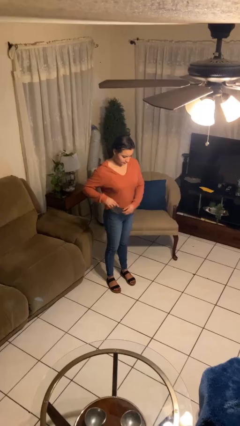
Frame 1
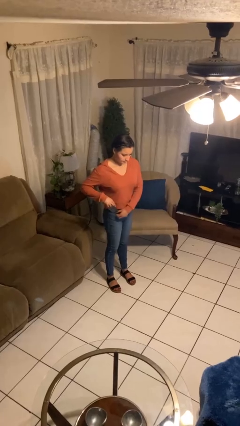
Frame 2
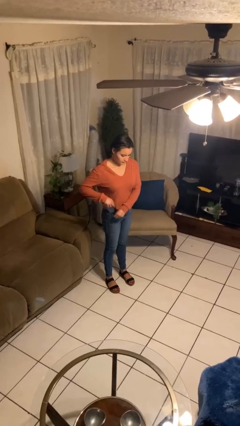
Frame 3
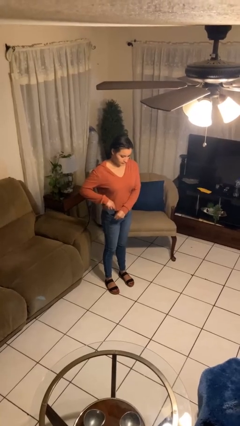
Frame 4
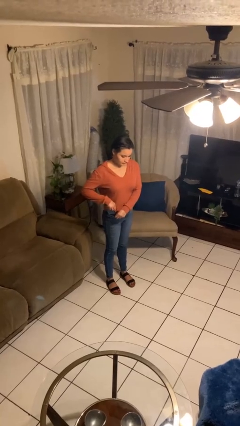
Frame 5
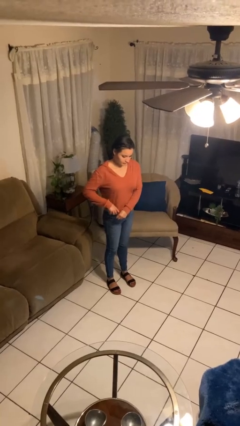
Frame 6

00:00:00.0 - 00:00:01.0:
person puts phone into pocket

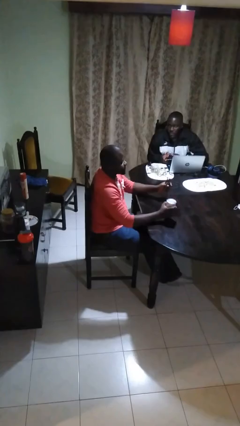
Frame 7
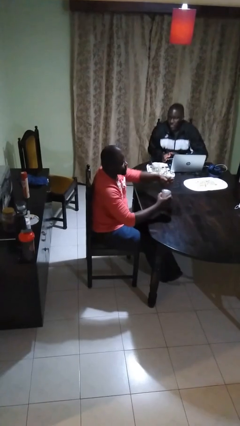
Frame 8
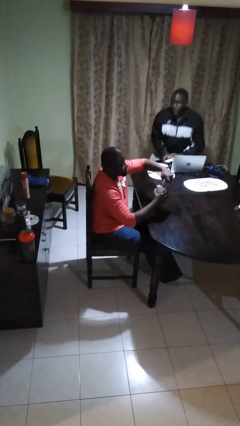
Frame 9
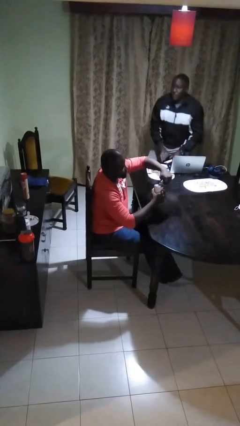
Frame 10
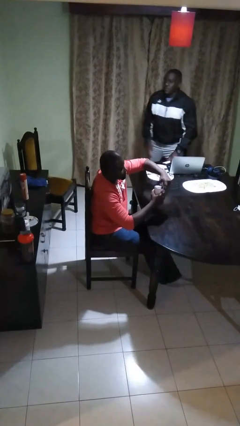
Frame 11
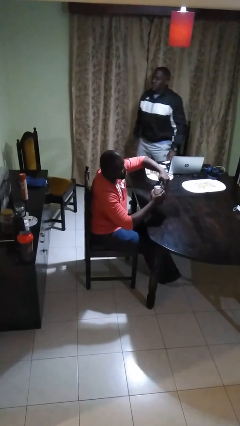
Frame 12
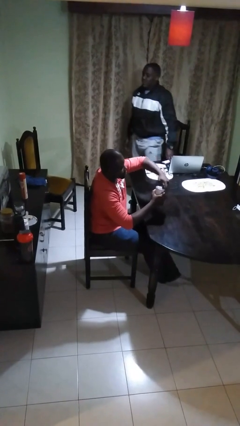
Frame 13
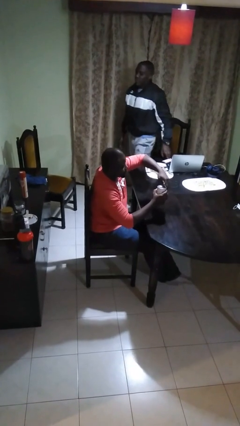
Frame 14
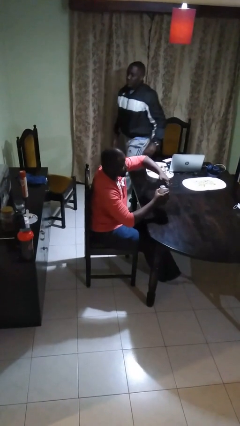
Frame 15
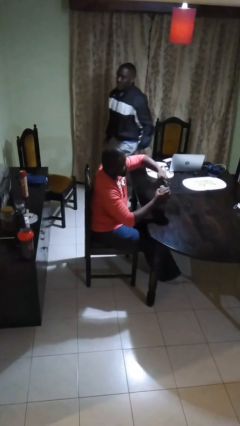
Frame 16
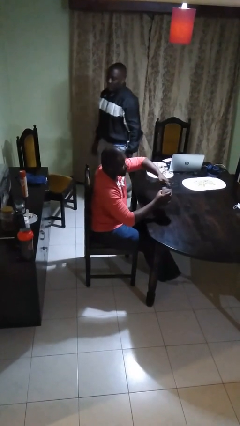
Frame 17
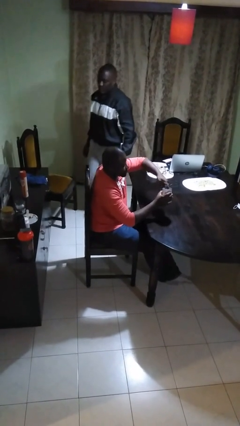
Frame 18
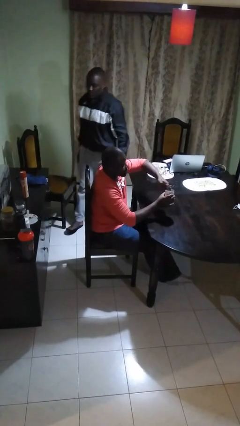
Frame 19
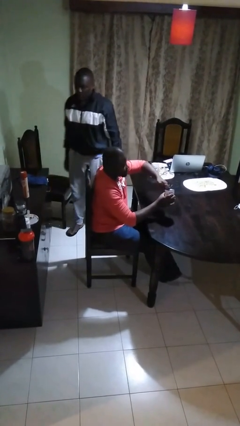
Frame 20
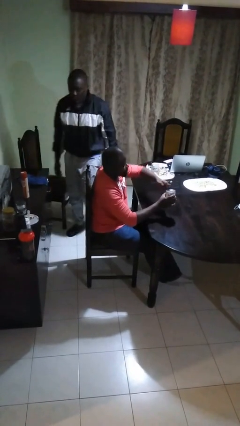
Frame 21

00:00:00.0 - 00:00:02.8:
person opens can with can opener

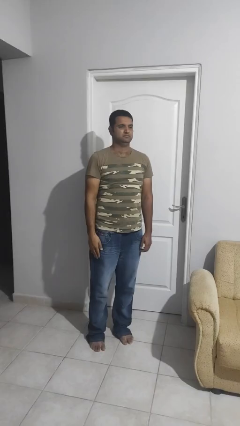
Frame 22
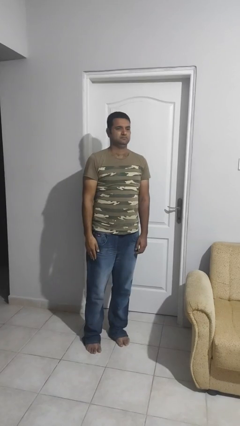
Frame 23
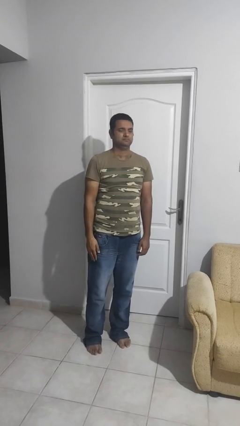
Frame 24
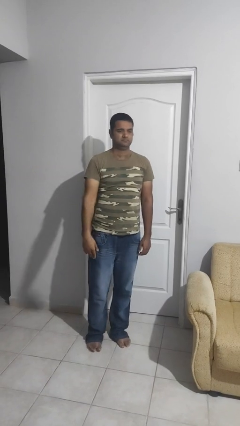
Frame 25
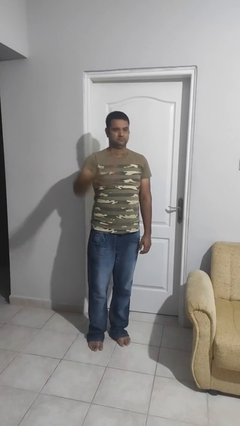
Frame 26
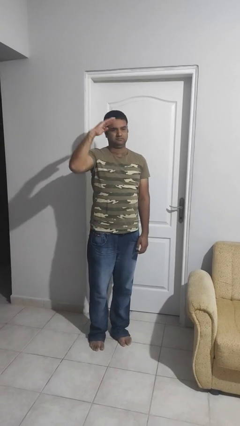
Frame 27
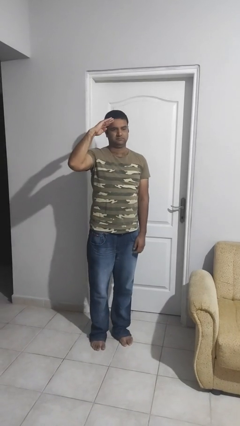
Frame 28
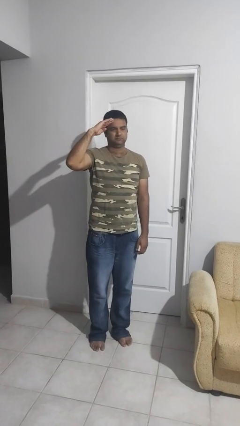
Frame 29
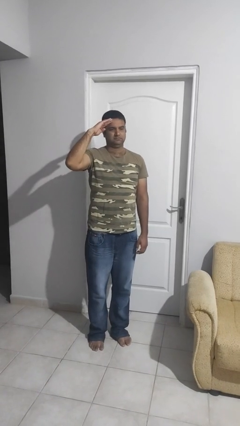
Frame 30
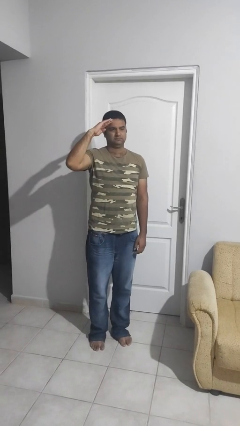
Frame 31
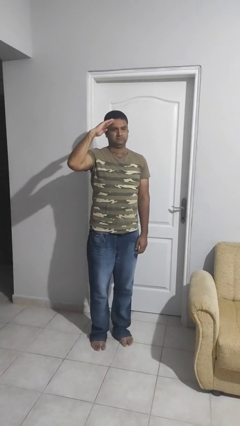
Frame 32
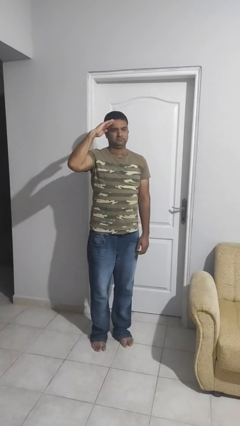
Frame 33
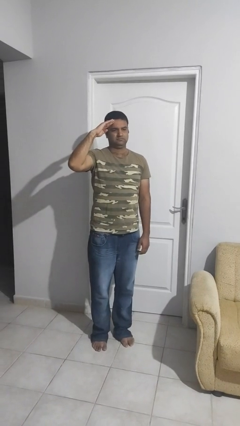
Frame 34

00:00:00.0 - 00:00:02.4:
person salutes

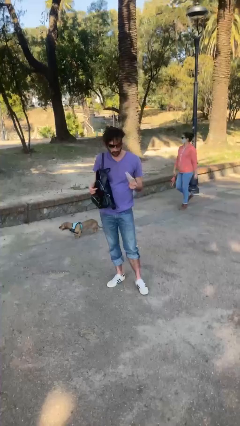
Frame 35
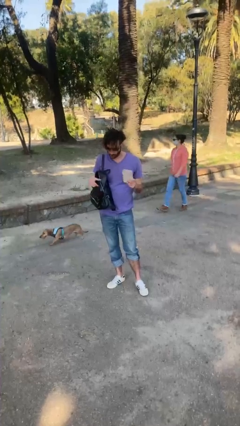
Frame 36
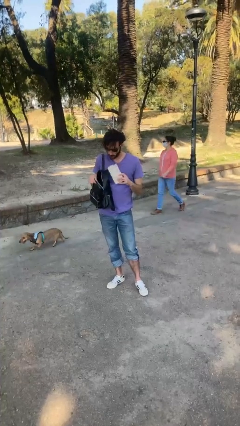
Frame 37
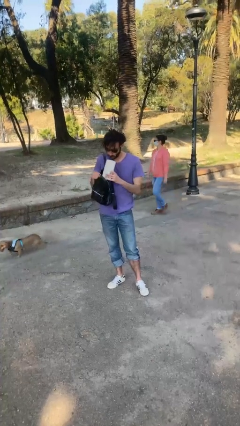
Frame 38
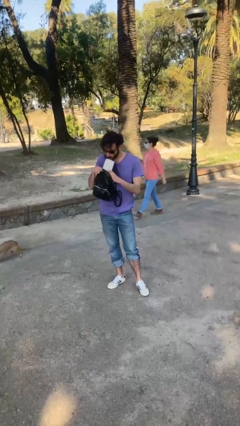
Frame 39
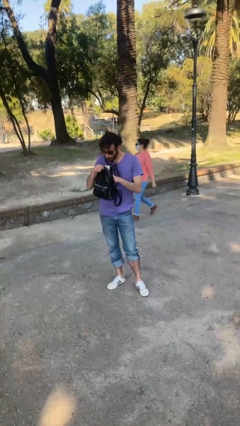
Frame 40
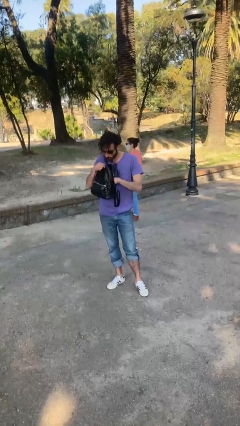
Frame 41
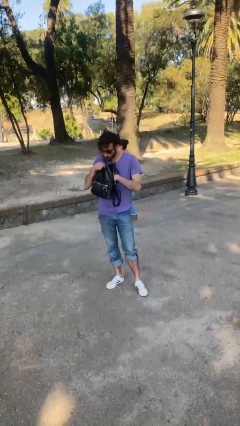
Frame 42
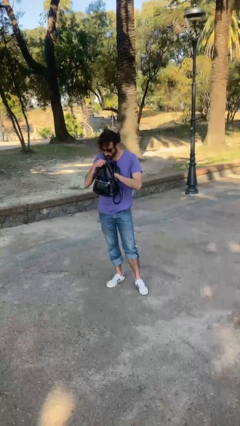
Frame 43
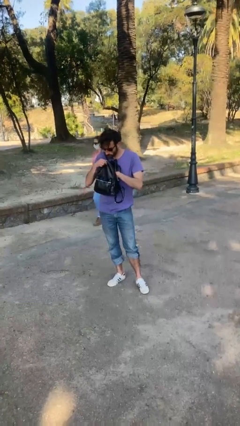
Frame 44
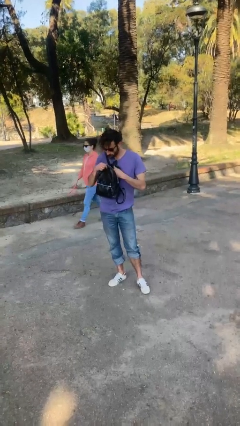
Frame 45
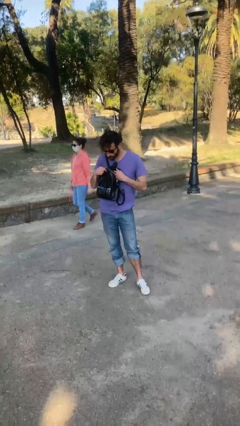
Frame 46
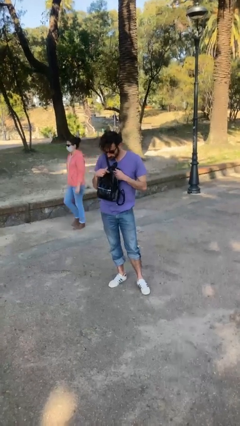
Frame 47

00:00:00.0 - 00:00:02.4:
person puts object into purse

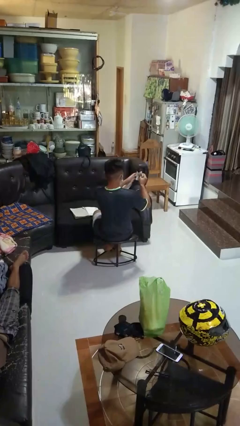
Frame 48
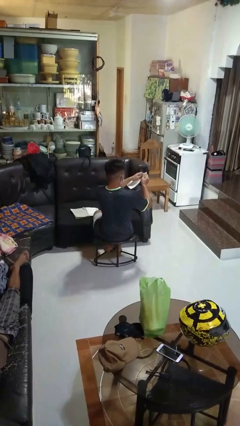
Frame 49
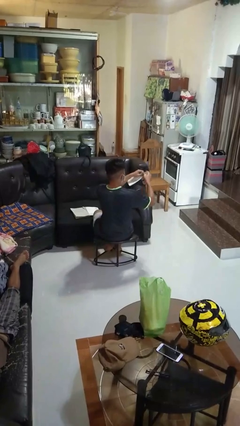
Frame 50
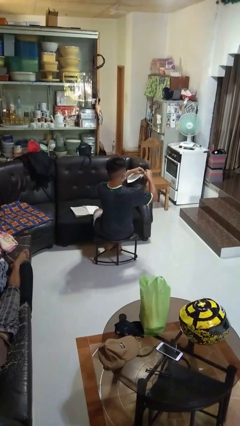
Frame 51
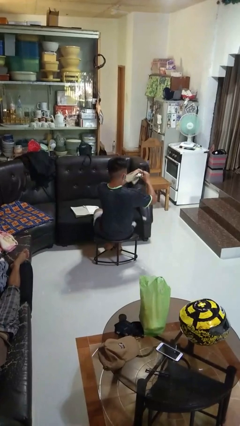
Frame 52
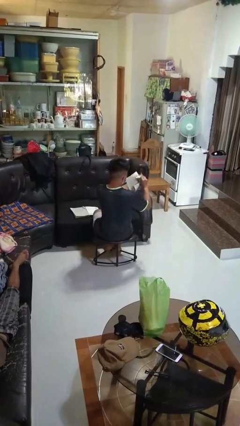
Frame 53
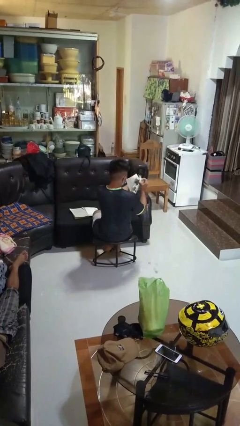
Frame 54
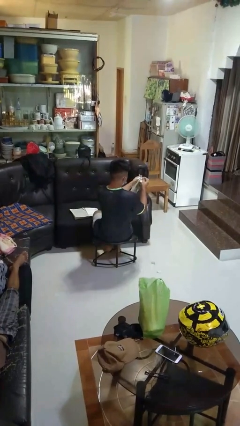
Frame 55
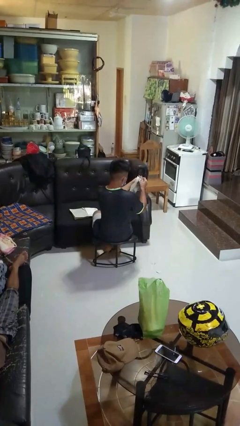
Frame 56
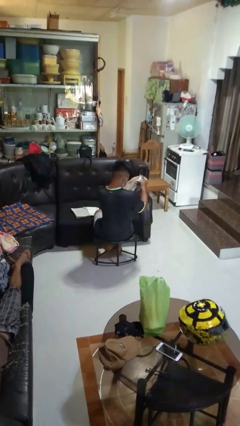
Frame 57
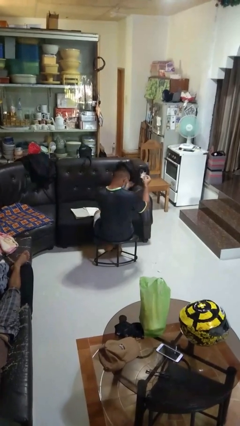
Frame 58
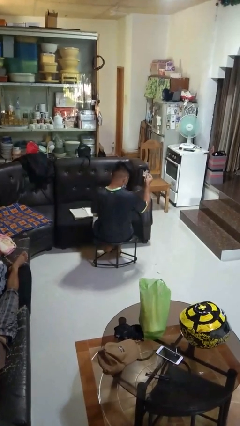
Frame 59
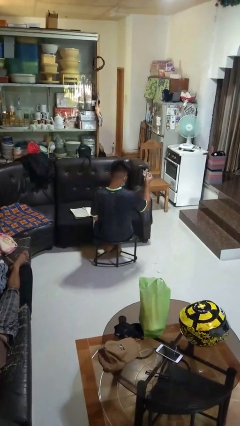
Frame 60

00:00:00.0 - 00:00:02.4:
person tears paper

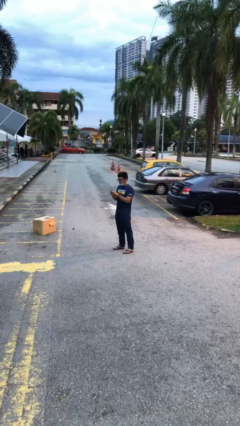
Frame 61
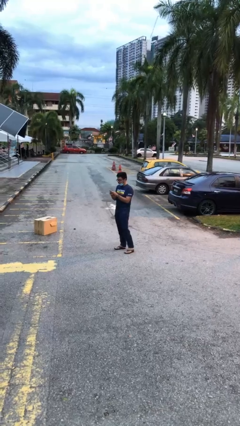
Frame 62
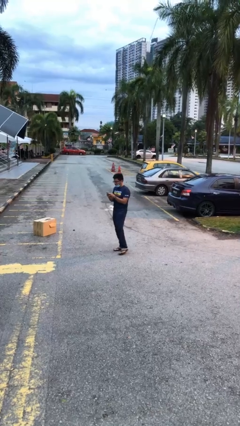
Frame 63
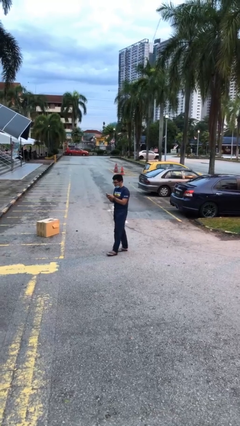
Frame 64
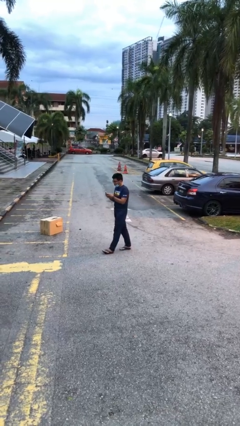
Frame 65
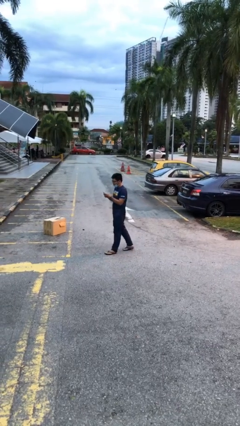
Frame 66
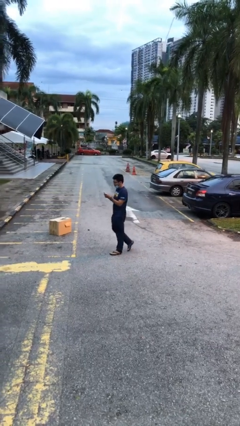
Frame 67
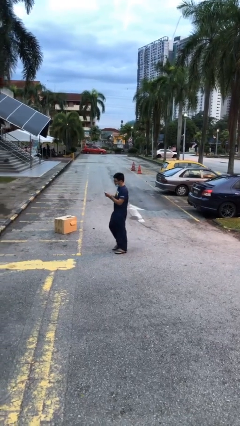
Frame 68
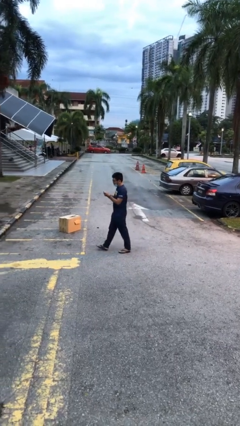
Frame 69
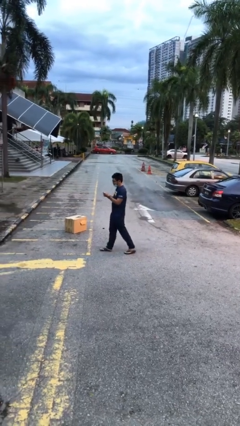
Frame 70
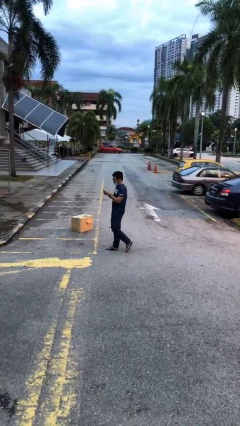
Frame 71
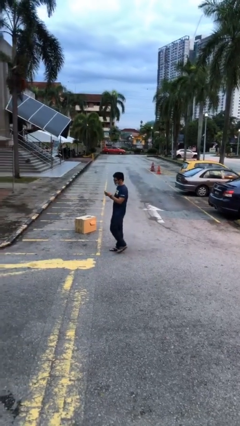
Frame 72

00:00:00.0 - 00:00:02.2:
person texts on phone

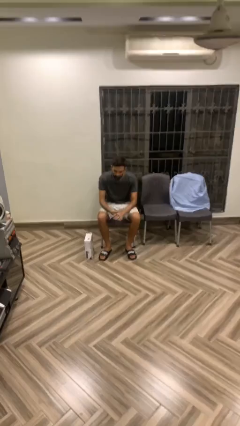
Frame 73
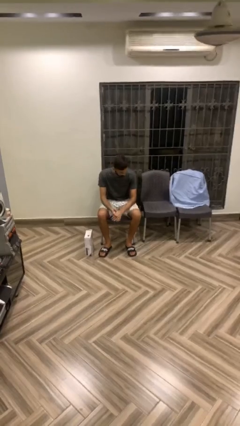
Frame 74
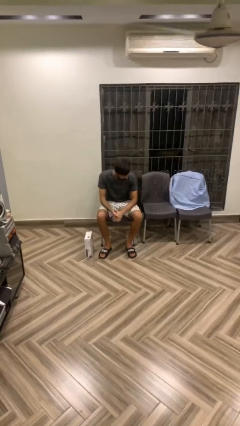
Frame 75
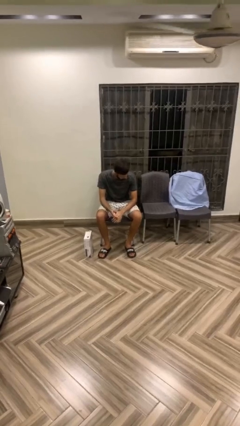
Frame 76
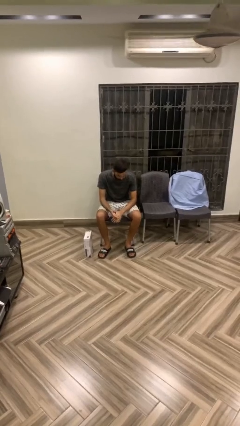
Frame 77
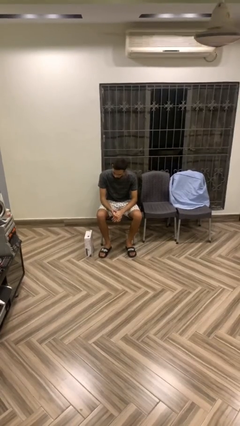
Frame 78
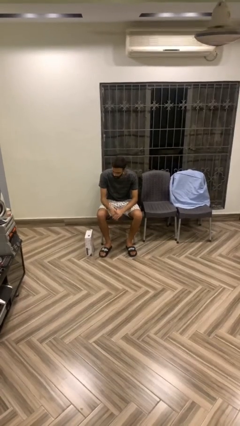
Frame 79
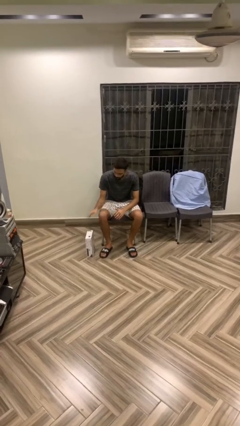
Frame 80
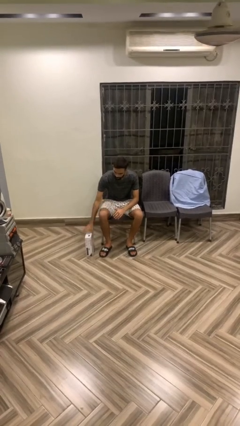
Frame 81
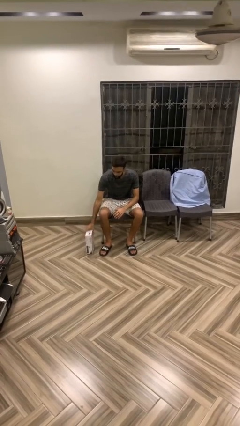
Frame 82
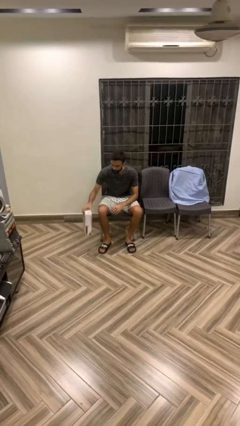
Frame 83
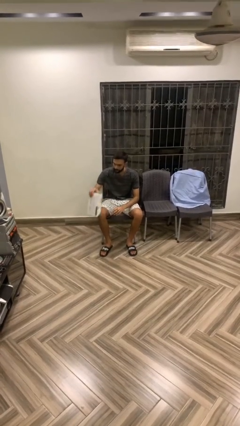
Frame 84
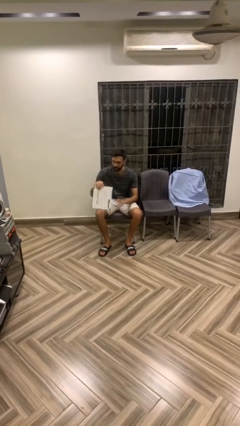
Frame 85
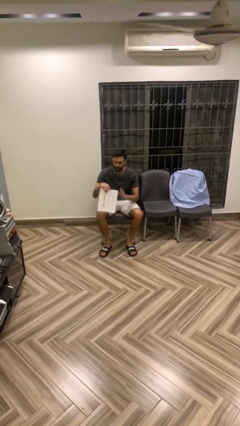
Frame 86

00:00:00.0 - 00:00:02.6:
person picks up object from floor

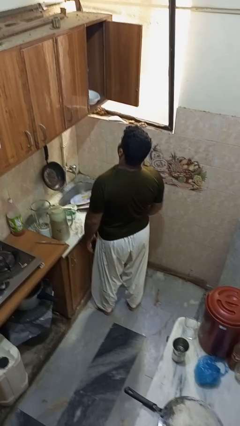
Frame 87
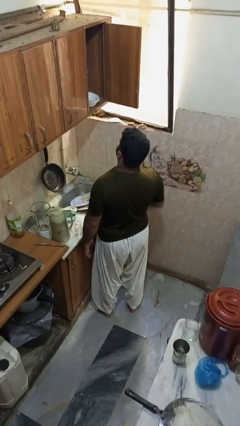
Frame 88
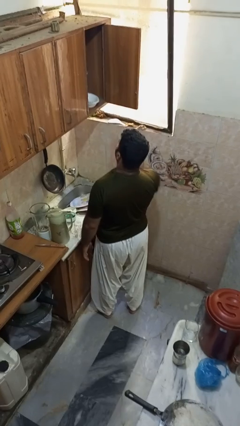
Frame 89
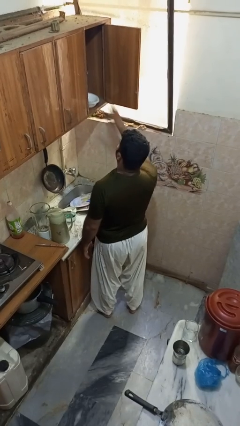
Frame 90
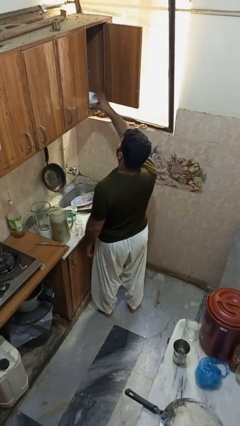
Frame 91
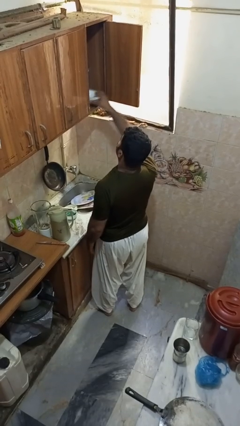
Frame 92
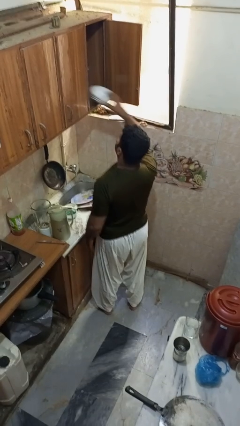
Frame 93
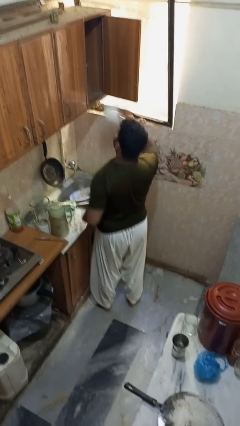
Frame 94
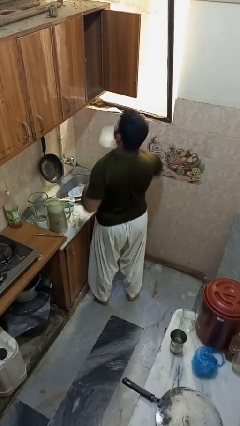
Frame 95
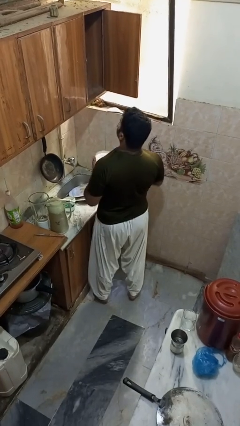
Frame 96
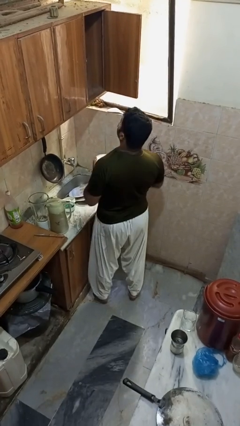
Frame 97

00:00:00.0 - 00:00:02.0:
person takes object from cabinet
